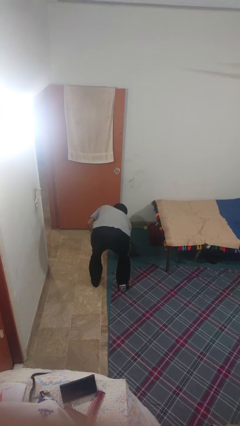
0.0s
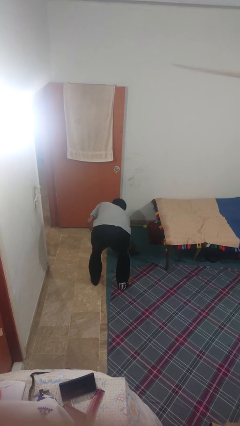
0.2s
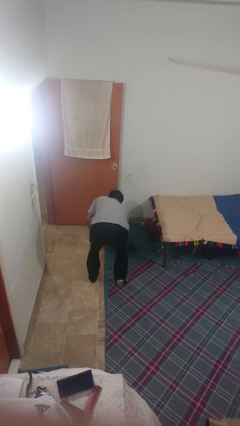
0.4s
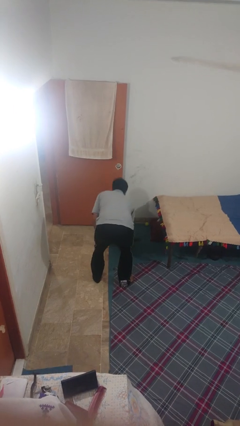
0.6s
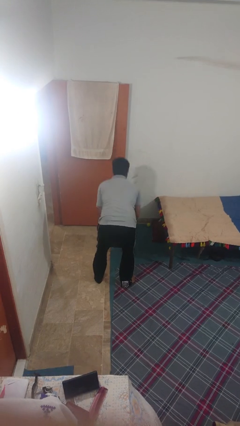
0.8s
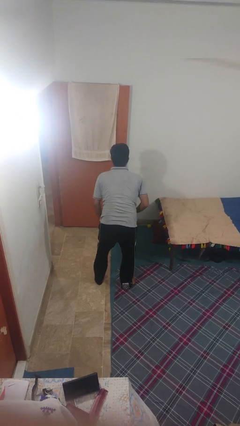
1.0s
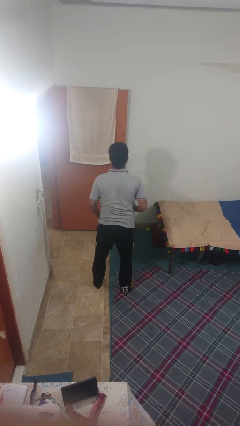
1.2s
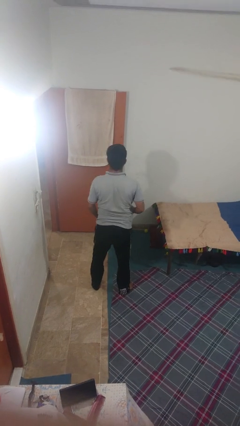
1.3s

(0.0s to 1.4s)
person picks up object from floor

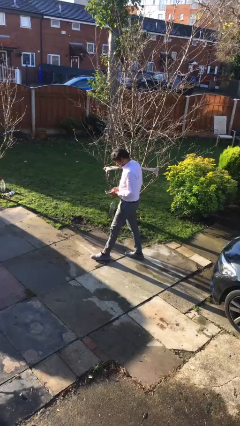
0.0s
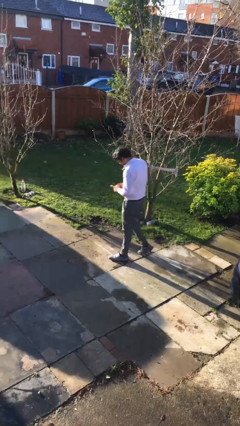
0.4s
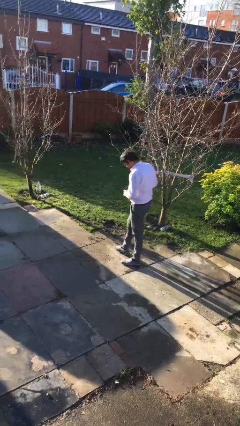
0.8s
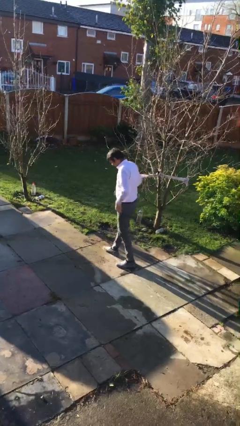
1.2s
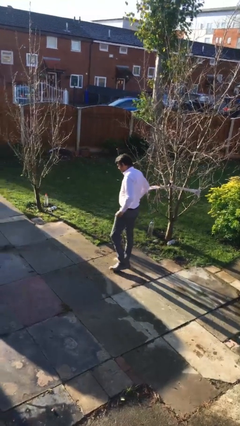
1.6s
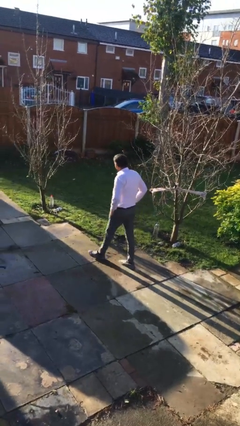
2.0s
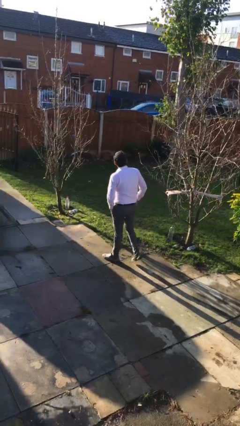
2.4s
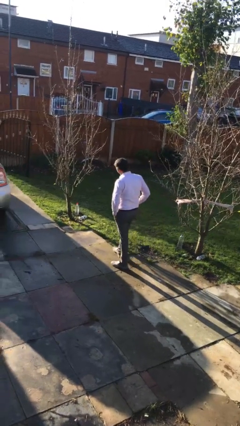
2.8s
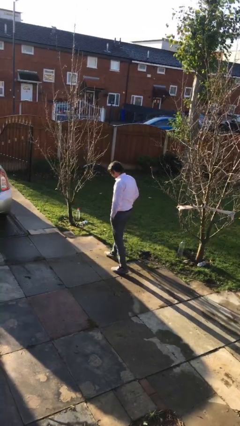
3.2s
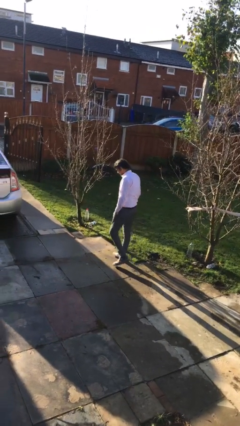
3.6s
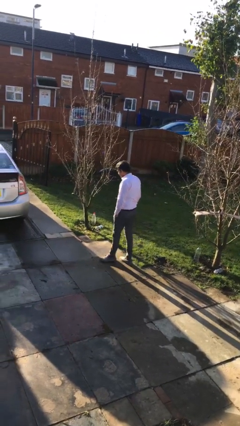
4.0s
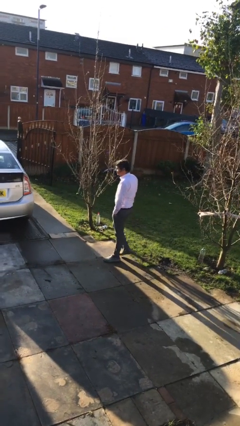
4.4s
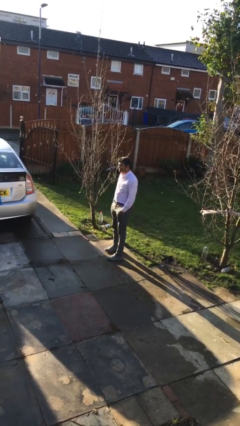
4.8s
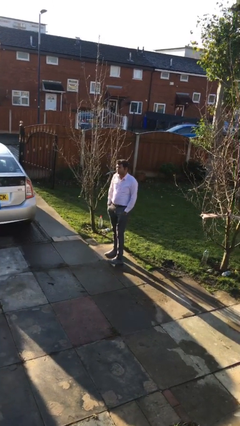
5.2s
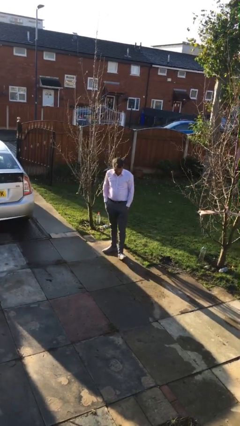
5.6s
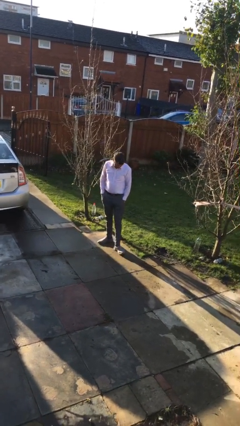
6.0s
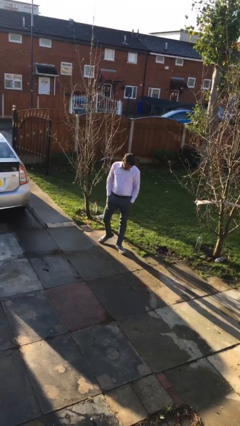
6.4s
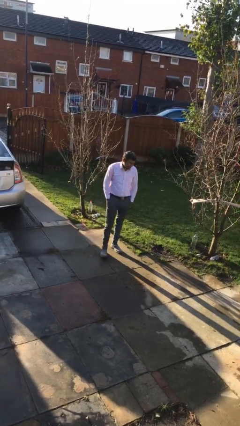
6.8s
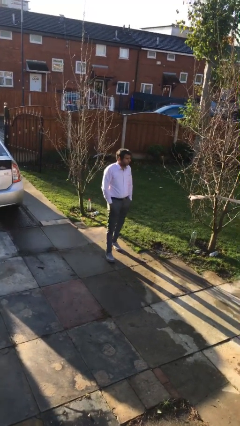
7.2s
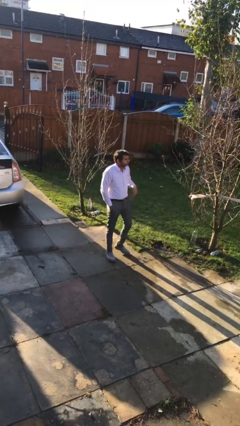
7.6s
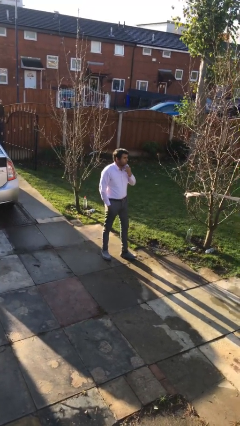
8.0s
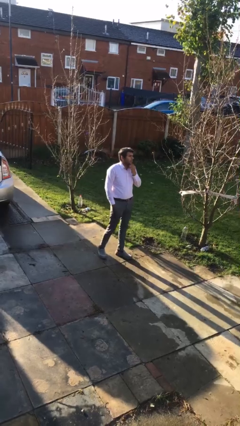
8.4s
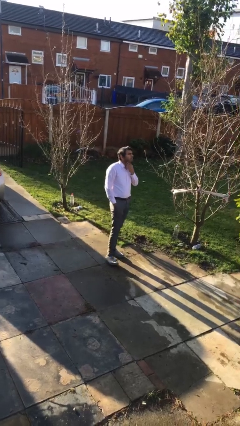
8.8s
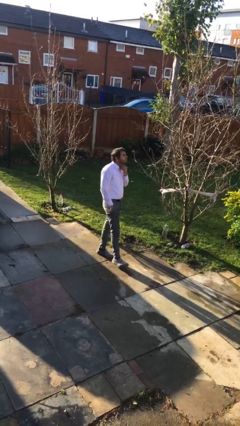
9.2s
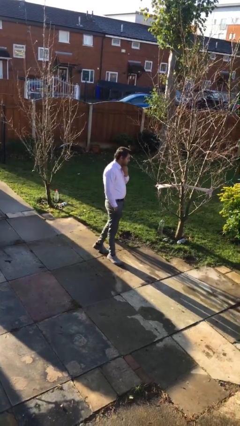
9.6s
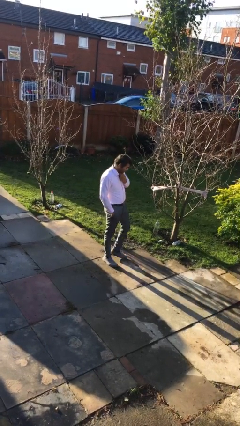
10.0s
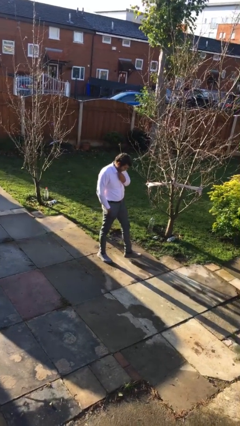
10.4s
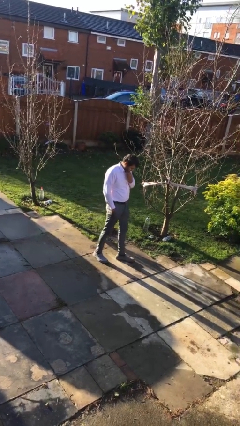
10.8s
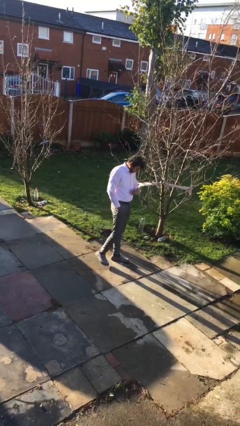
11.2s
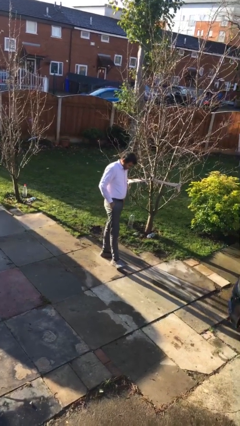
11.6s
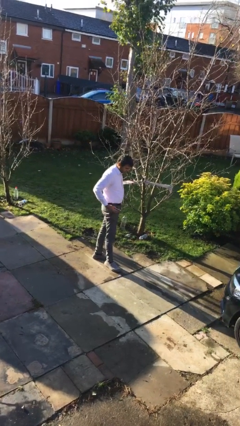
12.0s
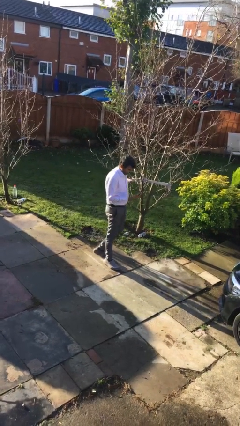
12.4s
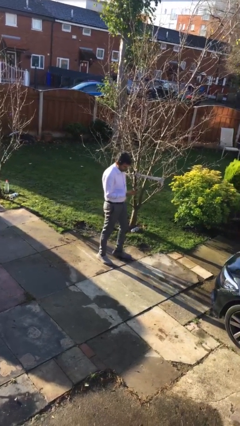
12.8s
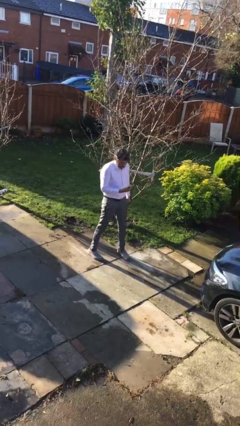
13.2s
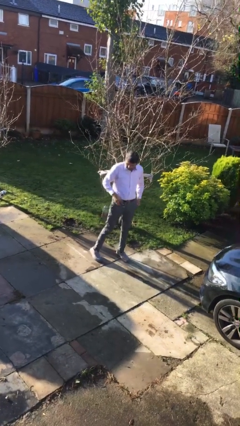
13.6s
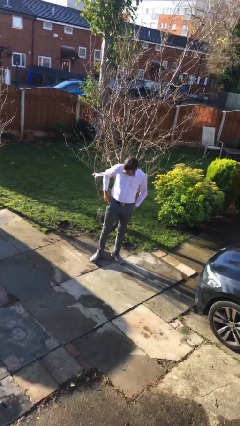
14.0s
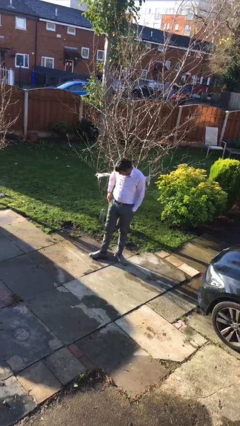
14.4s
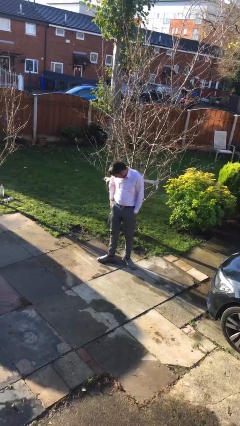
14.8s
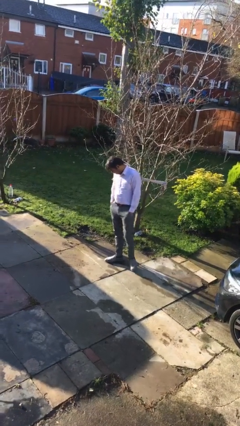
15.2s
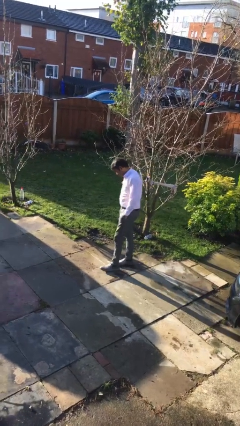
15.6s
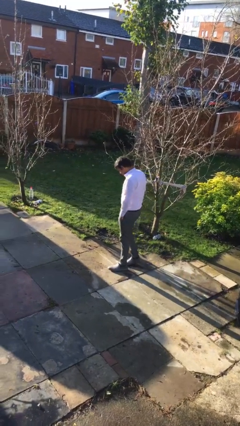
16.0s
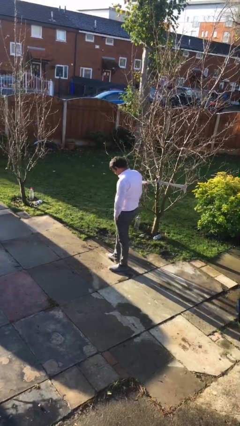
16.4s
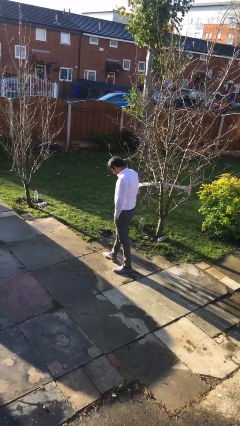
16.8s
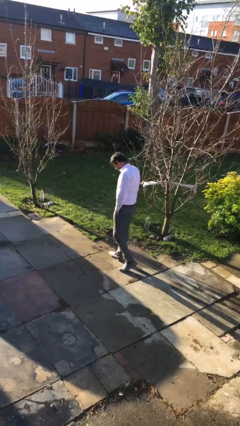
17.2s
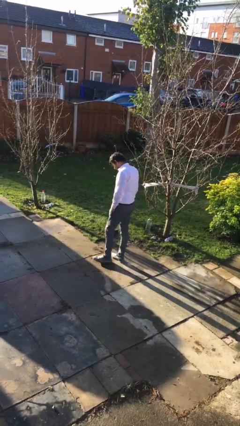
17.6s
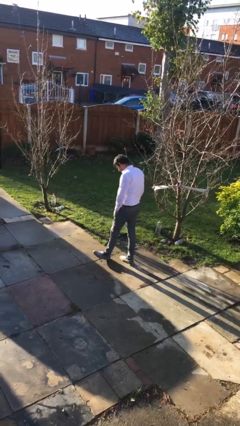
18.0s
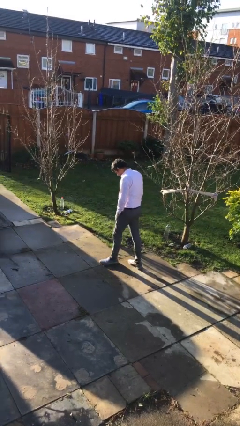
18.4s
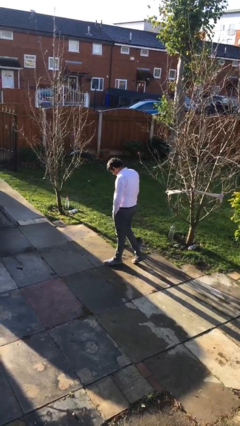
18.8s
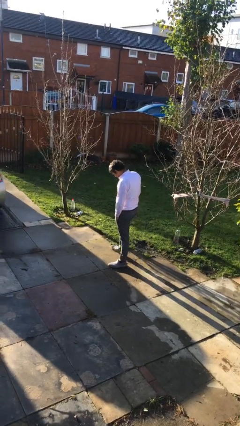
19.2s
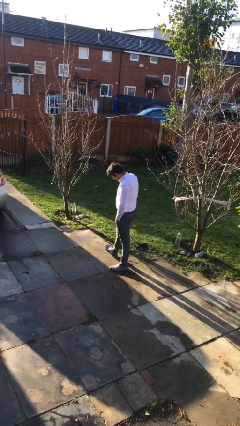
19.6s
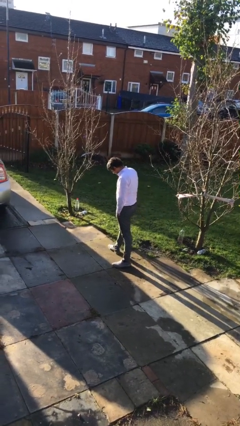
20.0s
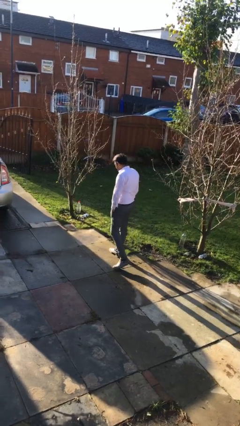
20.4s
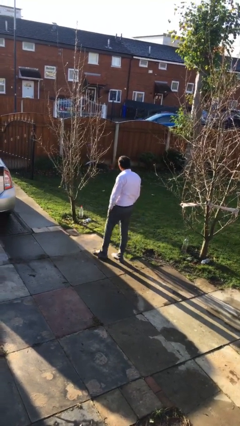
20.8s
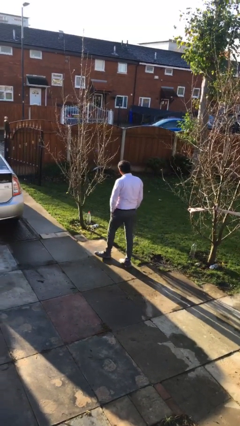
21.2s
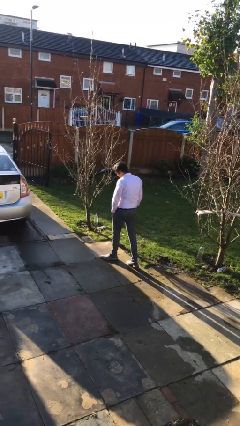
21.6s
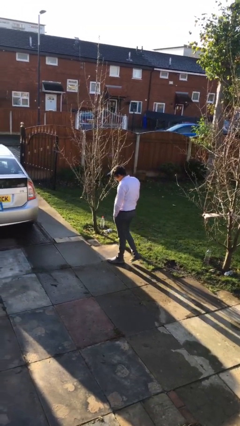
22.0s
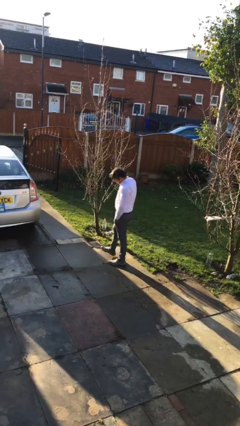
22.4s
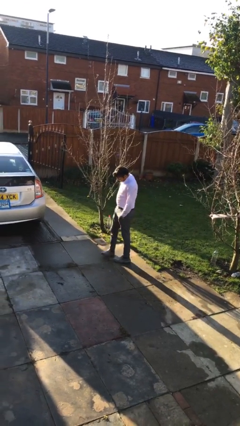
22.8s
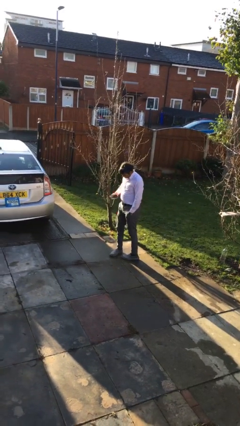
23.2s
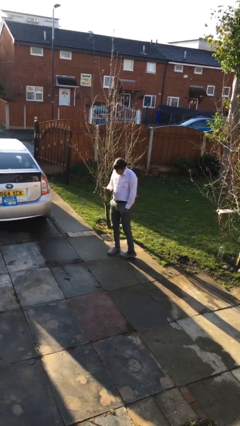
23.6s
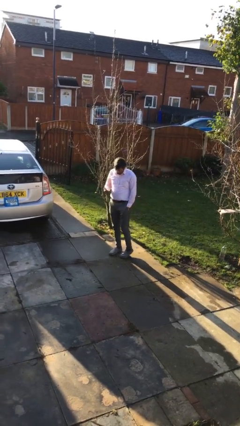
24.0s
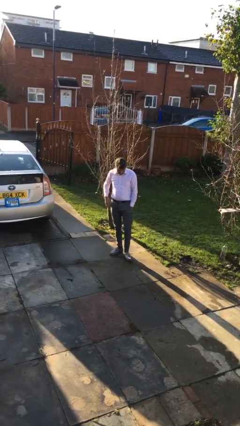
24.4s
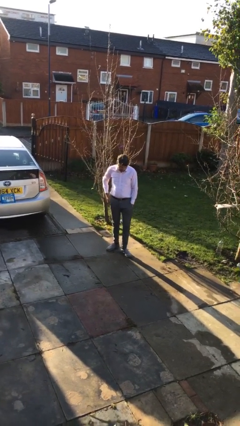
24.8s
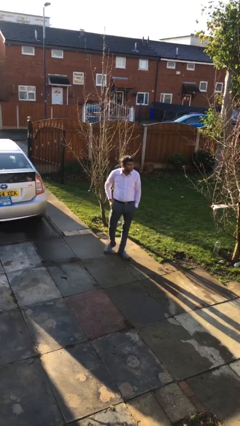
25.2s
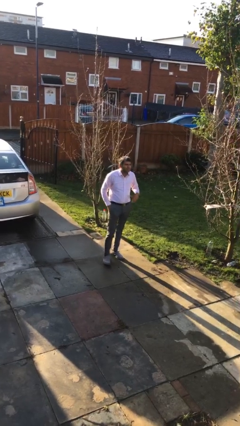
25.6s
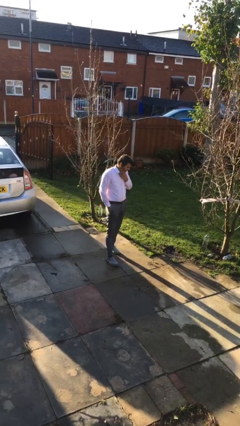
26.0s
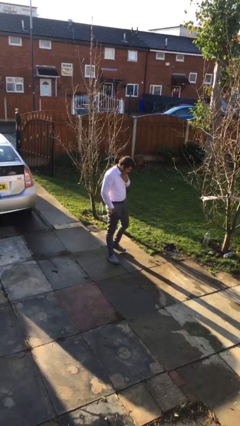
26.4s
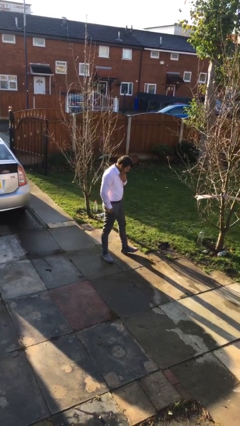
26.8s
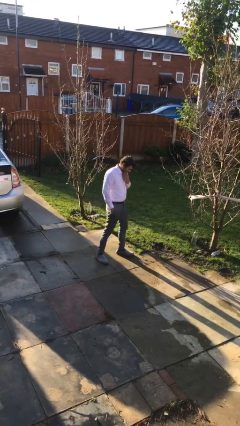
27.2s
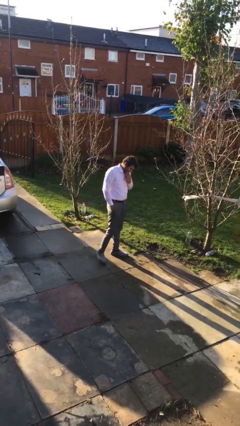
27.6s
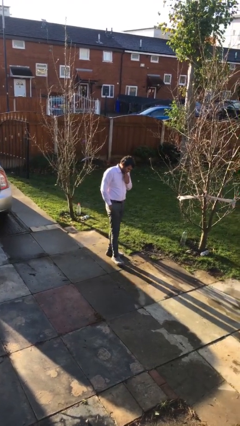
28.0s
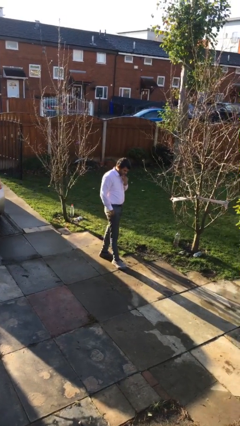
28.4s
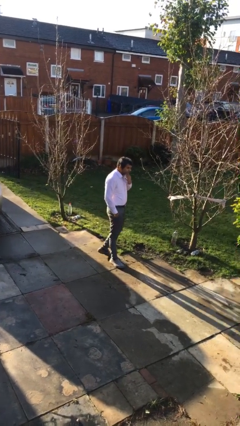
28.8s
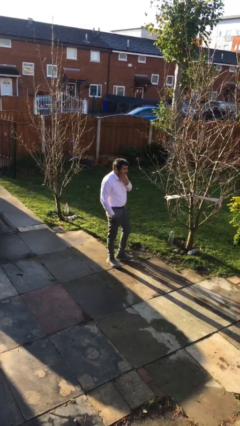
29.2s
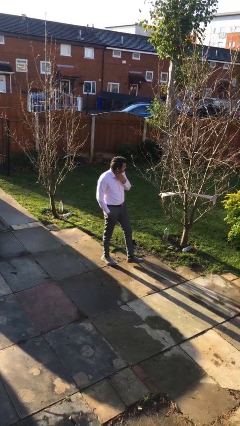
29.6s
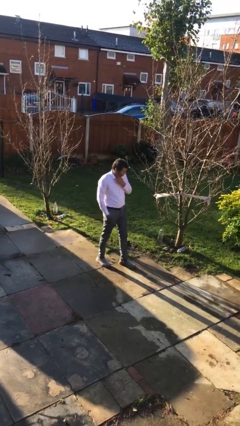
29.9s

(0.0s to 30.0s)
person walks

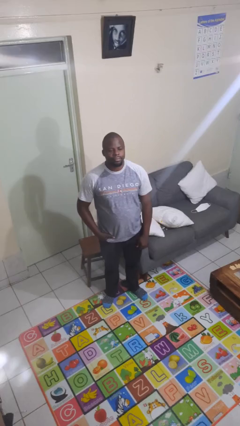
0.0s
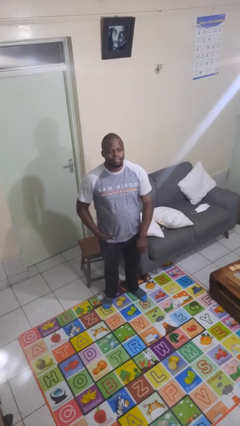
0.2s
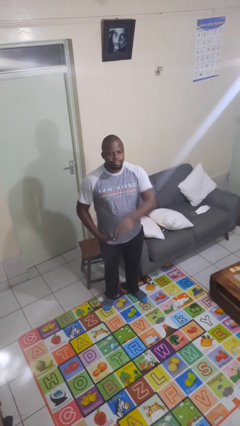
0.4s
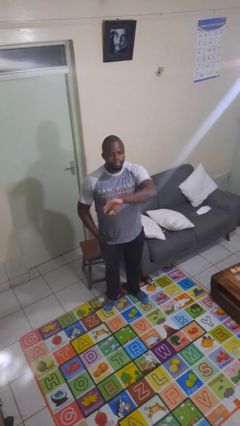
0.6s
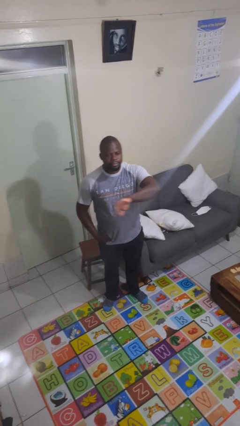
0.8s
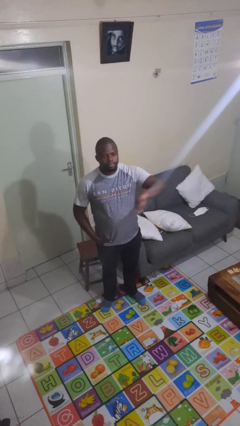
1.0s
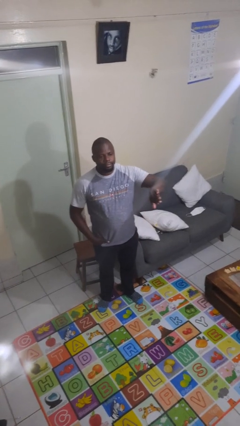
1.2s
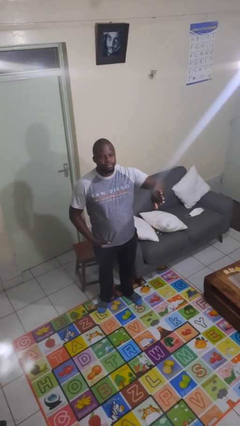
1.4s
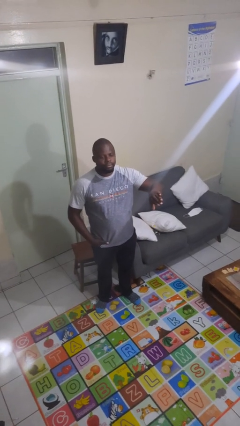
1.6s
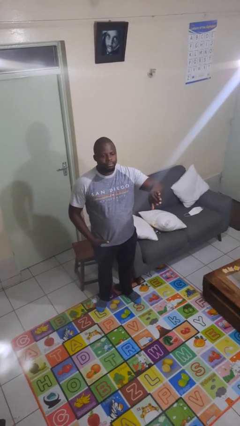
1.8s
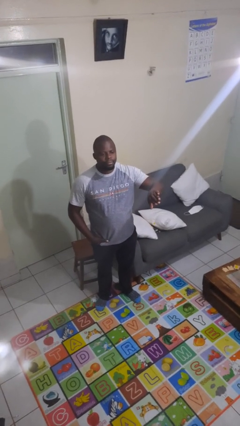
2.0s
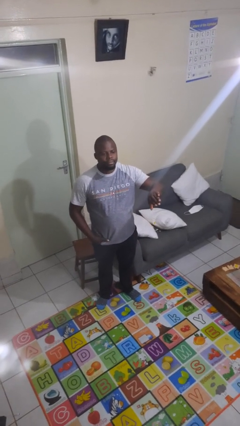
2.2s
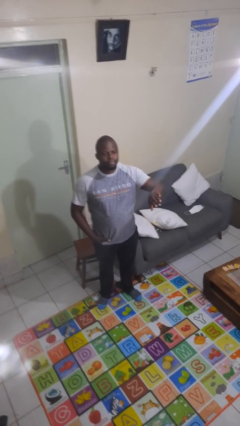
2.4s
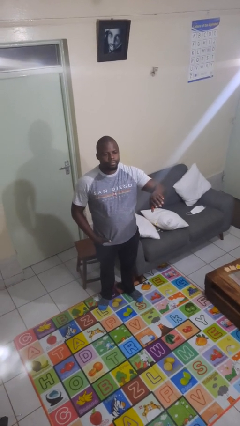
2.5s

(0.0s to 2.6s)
person gestures swipe left
